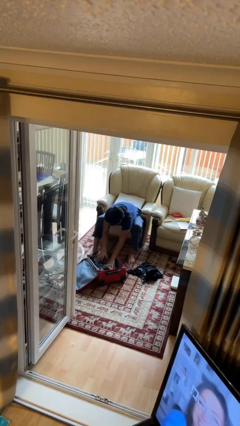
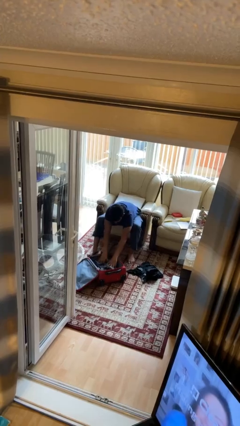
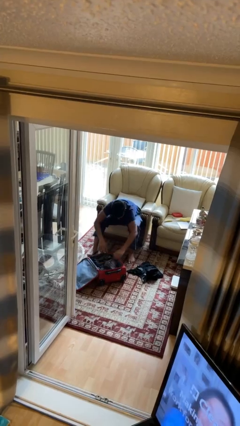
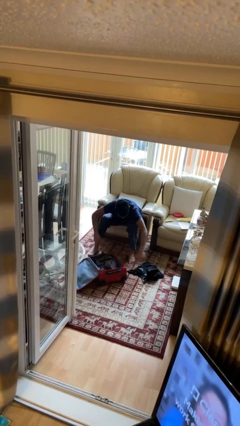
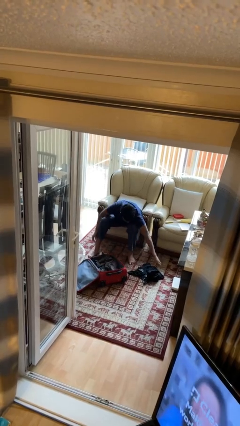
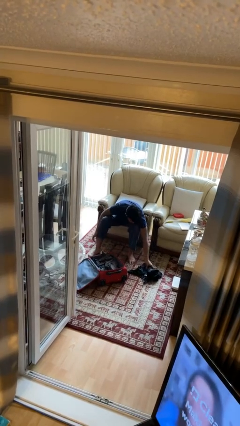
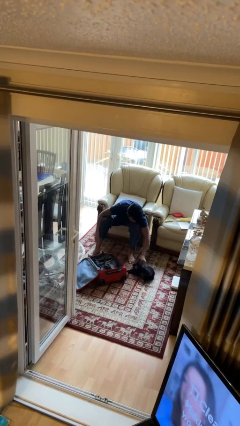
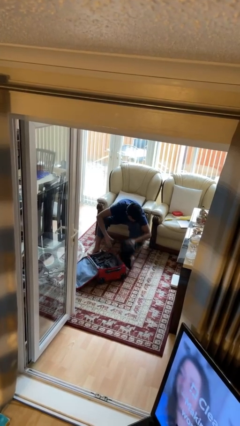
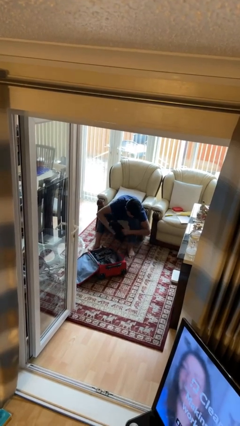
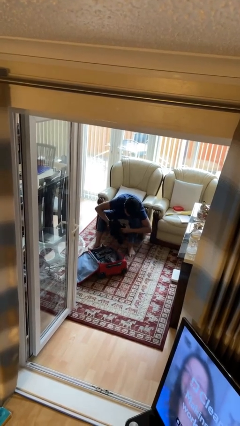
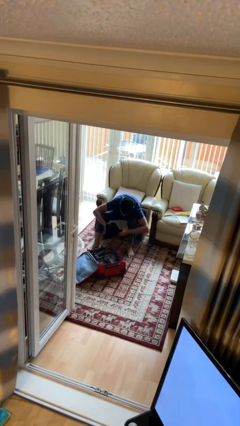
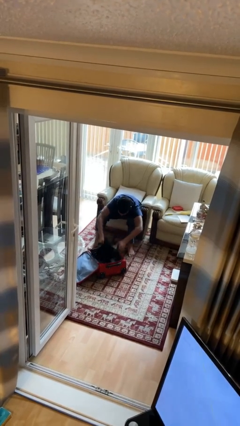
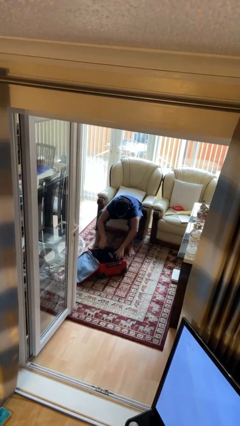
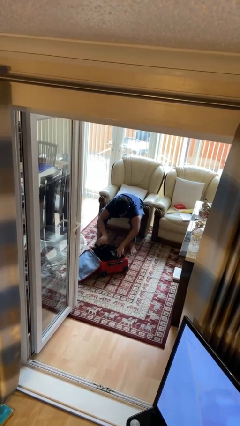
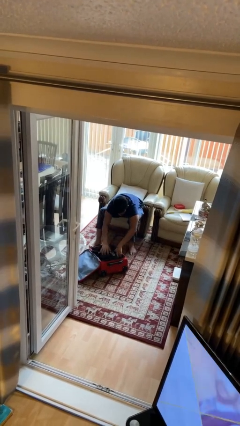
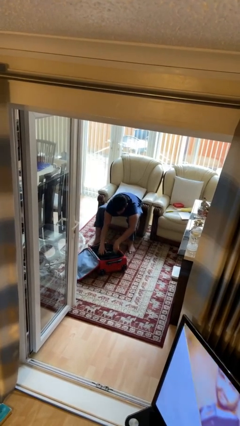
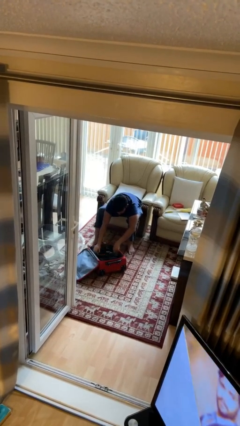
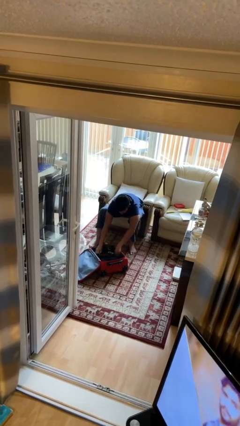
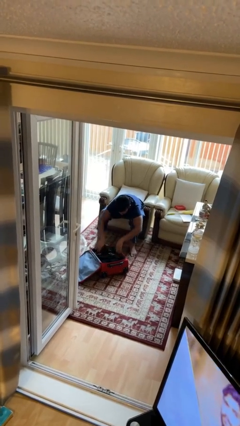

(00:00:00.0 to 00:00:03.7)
person loads clothes into suitcase

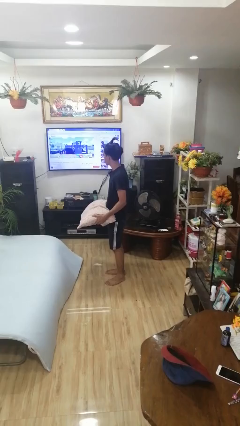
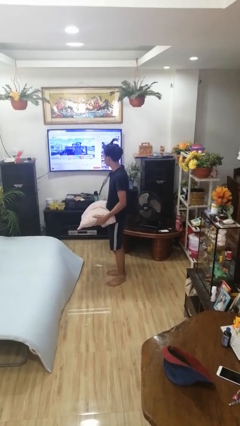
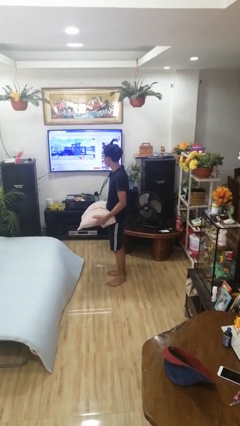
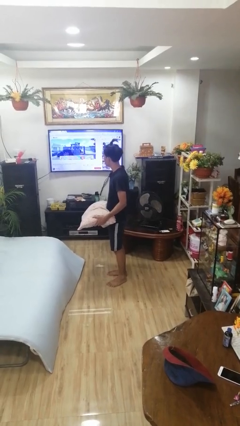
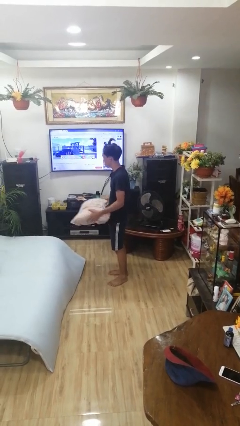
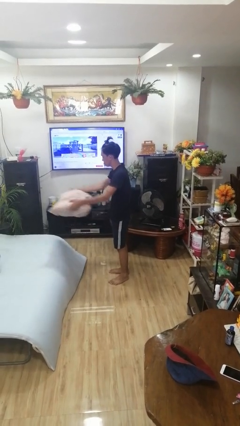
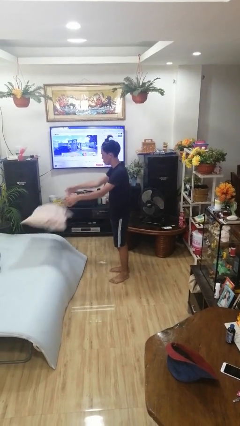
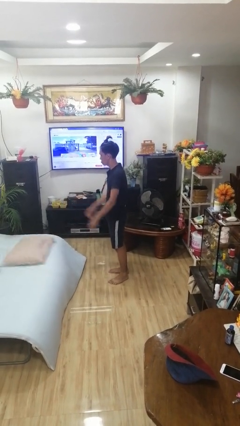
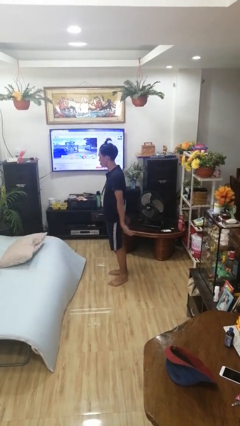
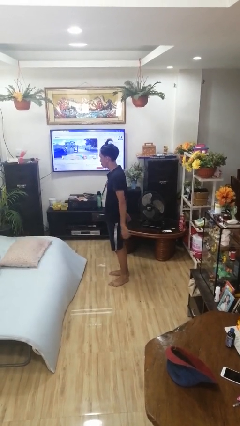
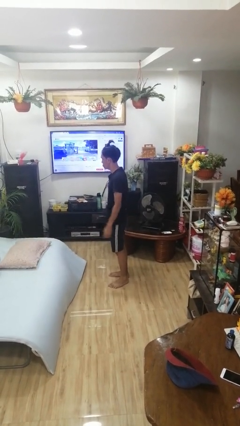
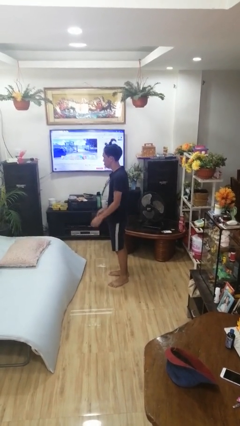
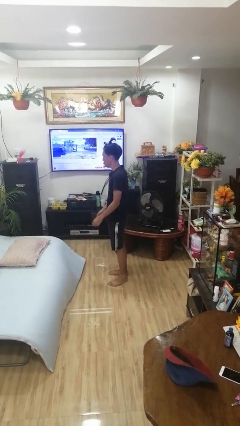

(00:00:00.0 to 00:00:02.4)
person throws object on bed

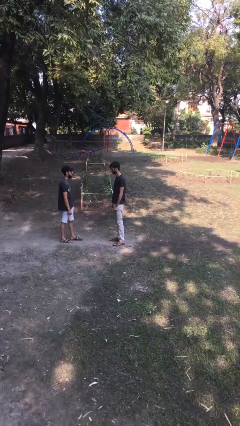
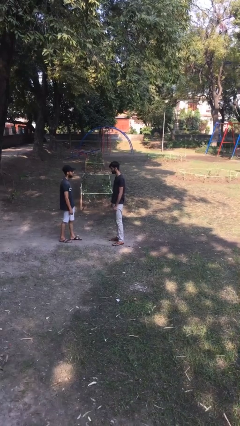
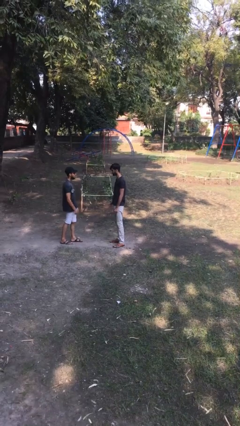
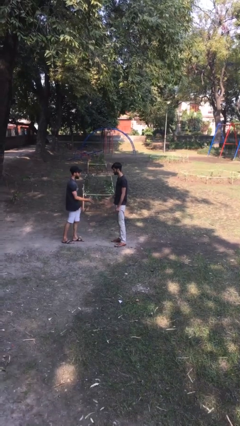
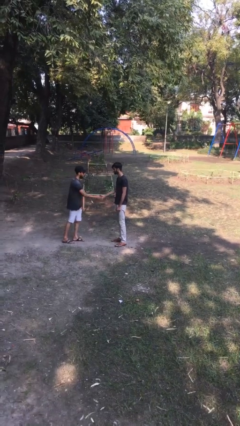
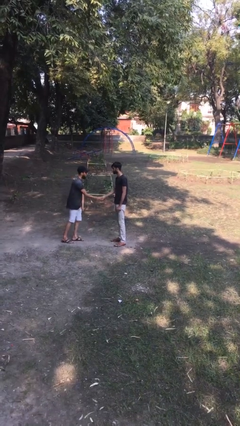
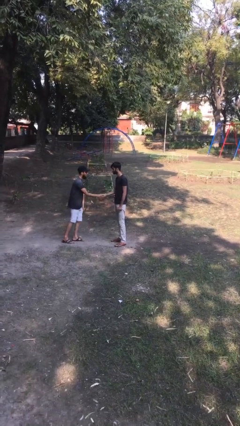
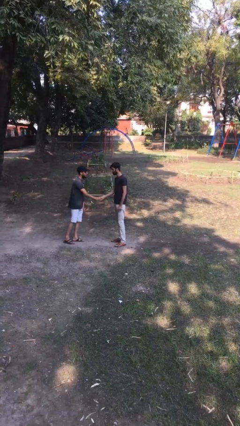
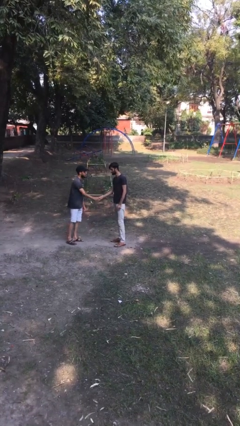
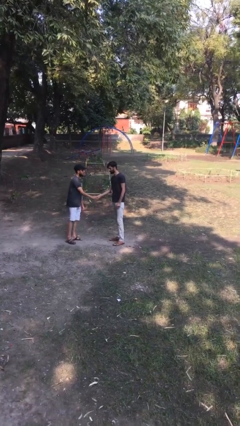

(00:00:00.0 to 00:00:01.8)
person shakes hand

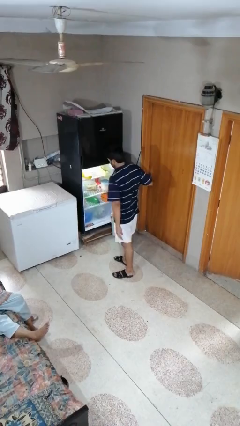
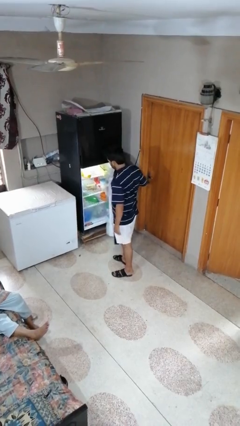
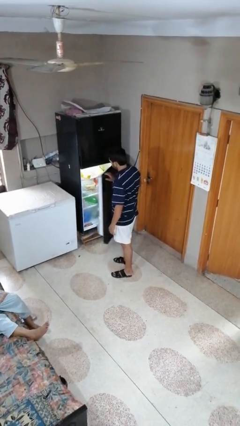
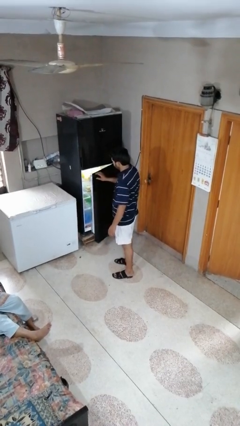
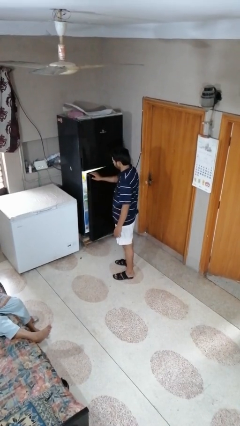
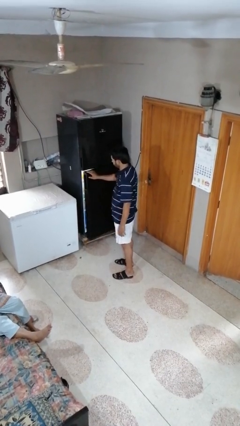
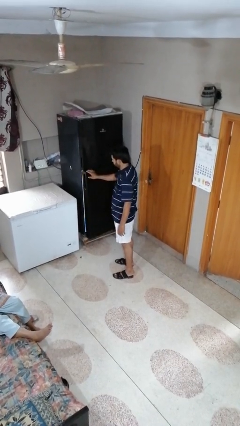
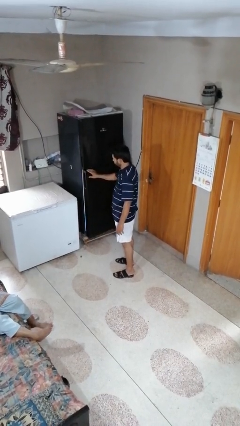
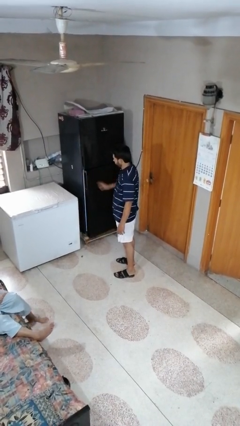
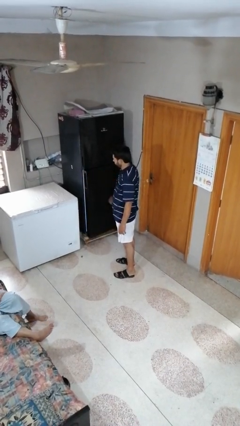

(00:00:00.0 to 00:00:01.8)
person closes refrigerator

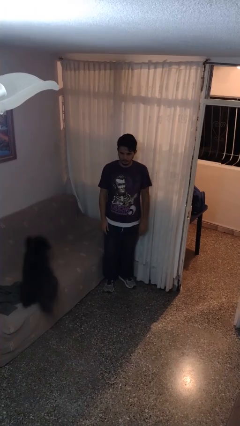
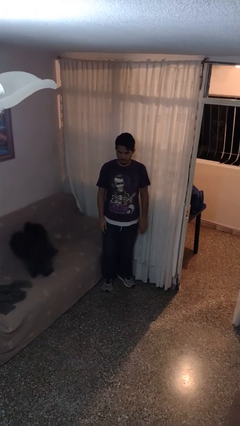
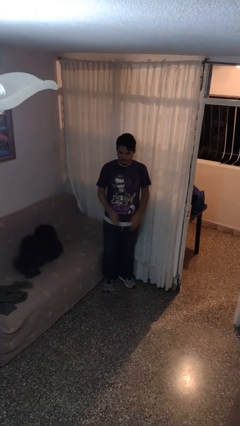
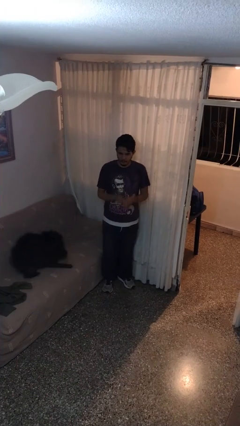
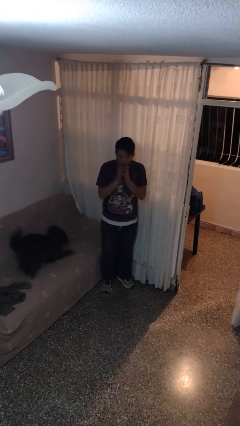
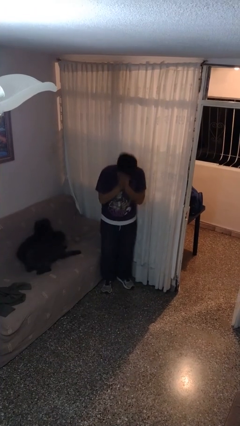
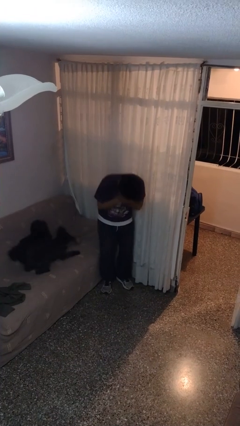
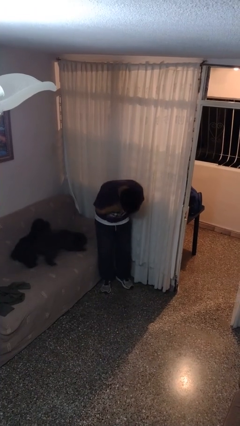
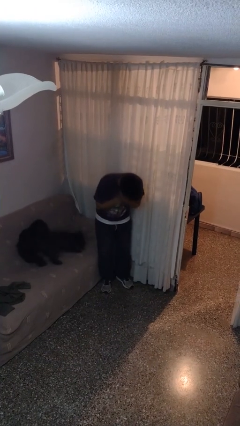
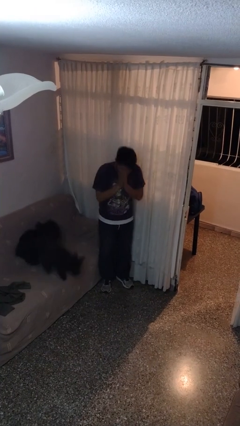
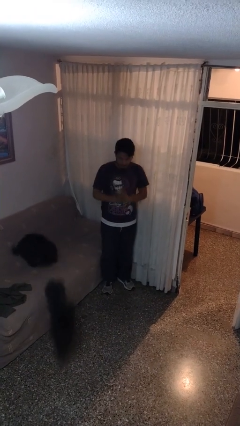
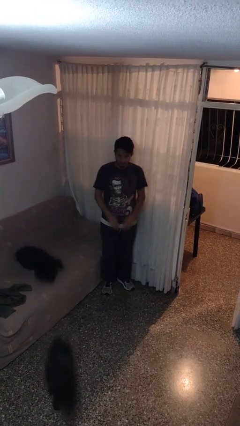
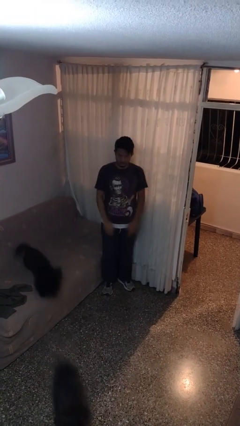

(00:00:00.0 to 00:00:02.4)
person sneezes into hand

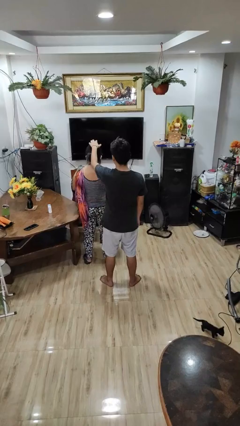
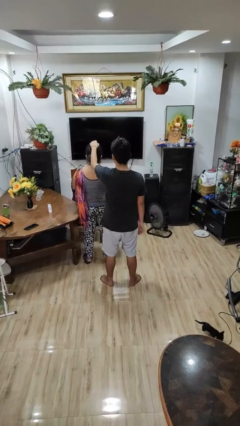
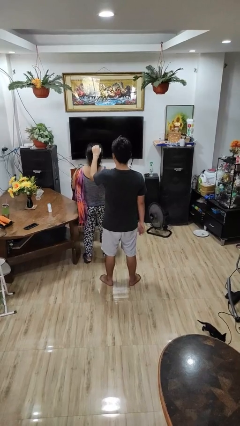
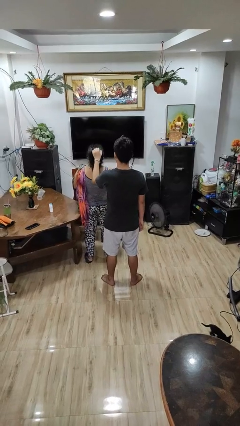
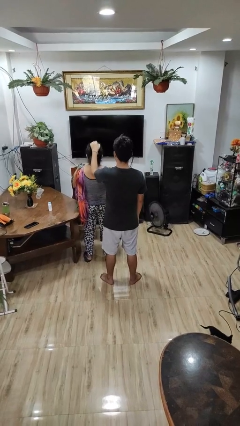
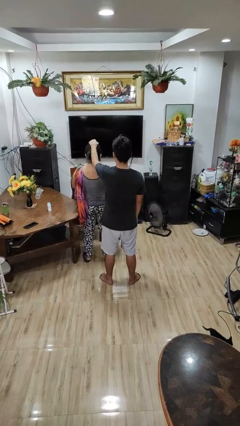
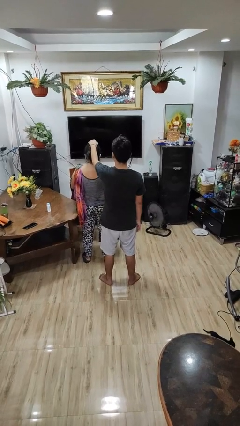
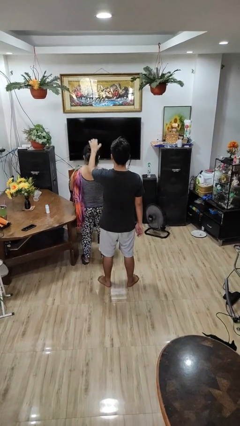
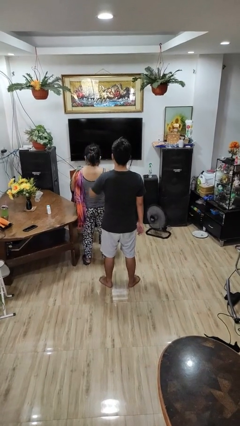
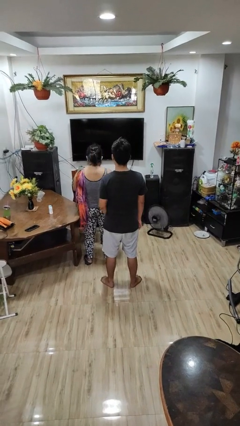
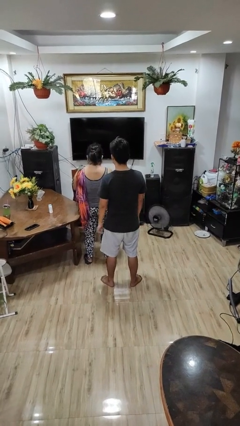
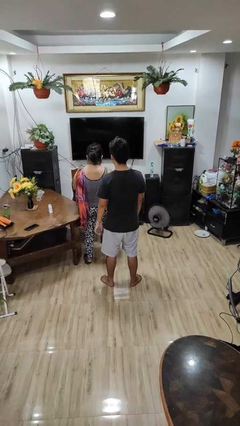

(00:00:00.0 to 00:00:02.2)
person grabs person by hair

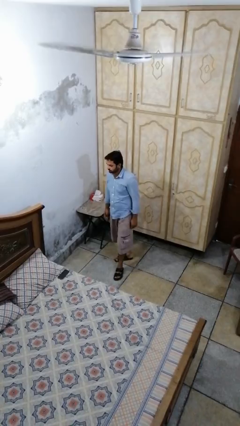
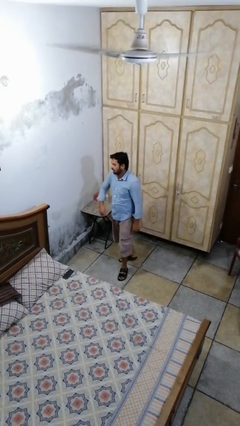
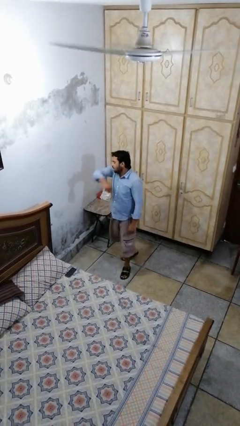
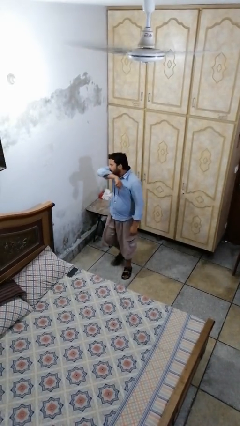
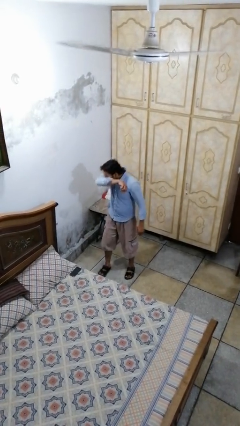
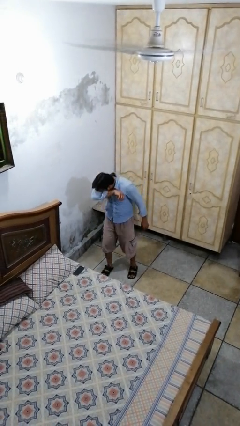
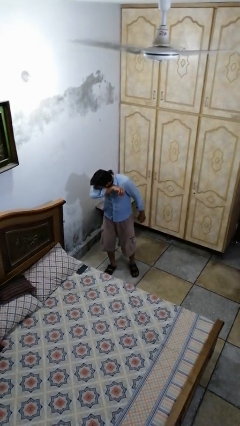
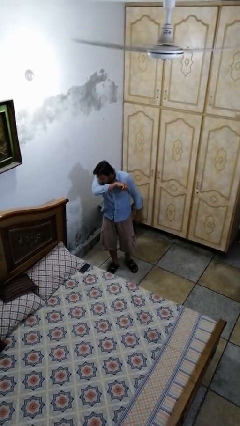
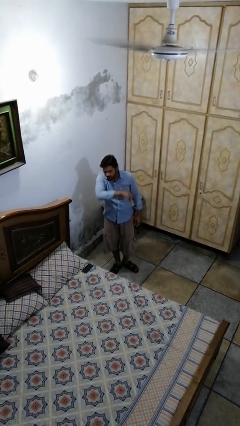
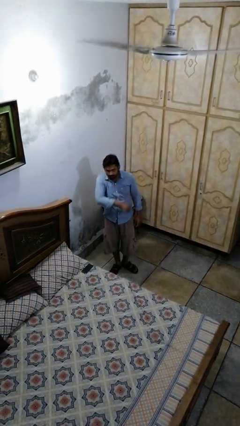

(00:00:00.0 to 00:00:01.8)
person sneezes into arm

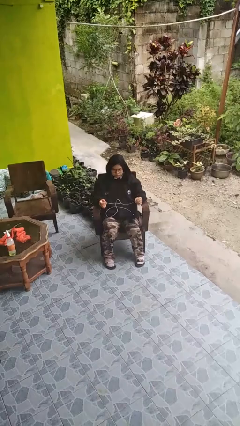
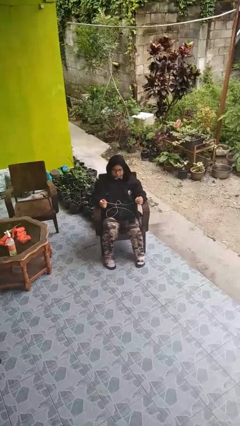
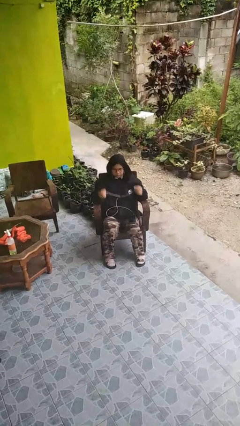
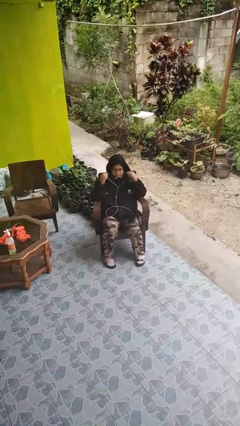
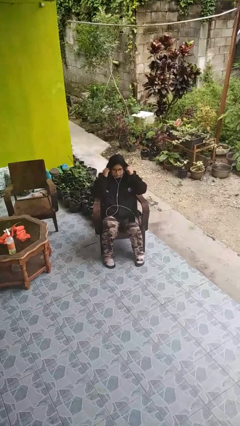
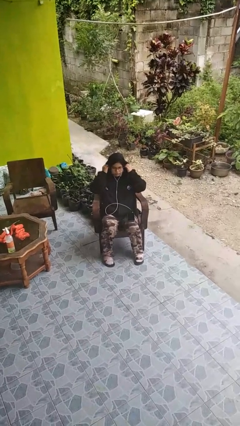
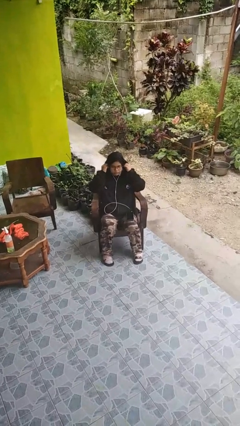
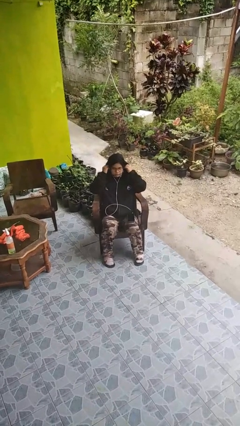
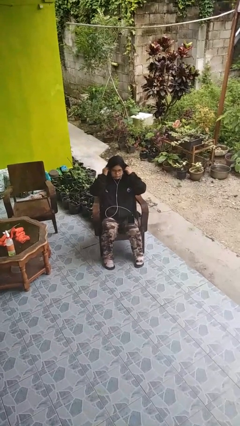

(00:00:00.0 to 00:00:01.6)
person puts on headphones
